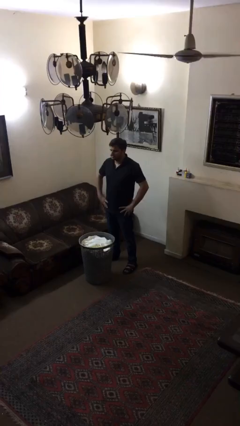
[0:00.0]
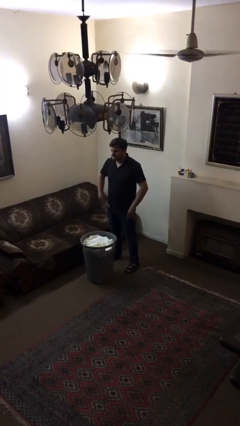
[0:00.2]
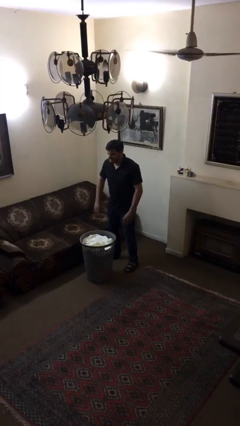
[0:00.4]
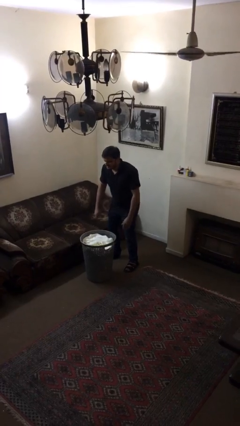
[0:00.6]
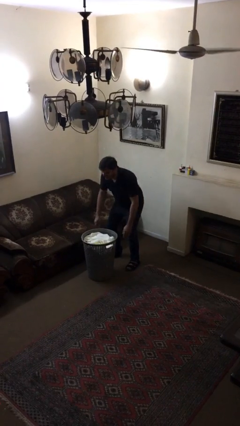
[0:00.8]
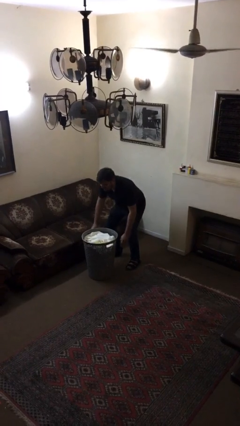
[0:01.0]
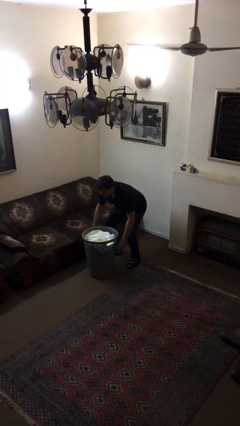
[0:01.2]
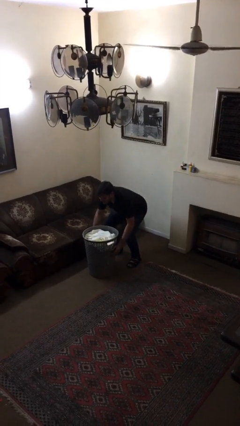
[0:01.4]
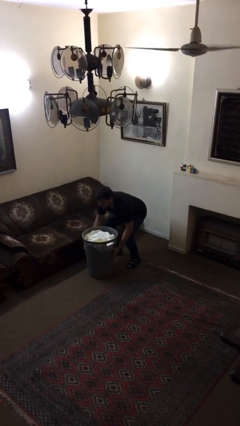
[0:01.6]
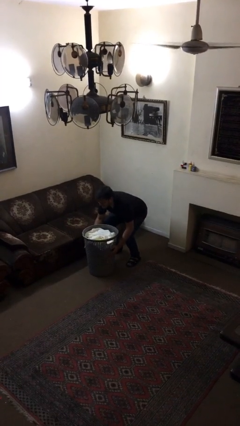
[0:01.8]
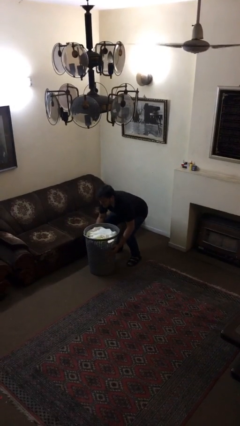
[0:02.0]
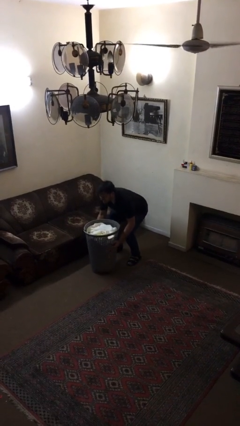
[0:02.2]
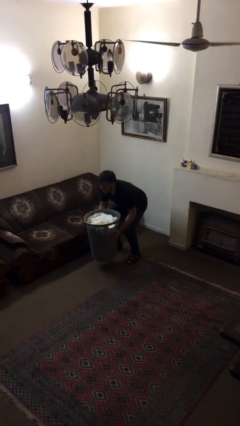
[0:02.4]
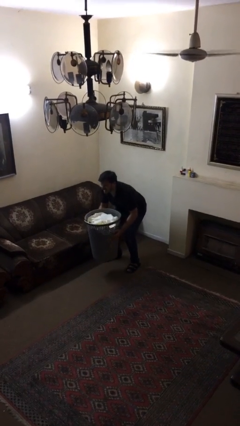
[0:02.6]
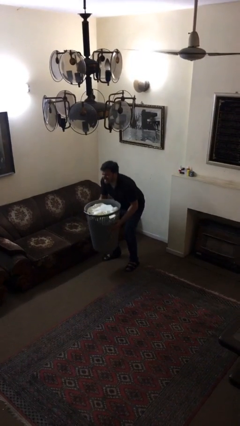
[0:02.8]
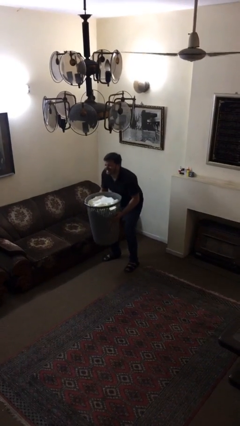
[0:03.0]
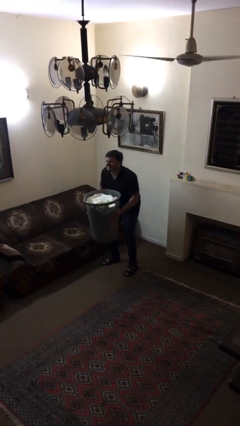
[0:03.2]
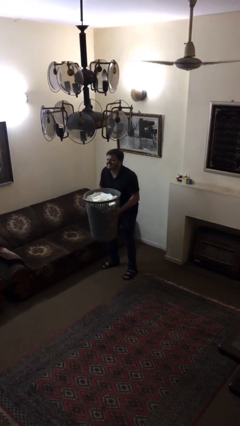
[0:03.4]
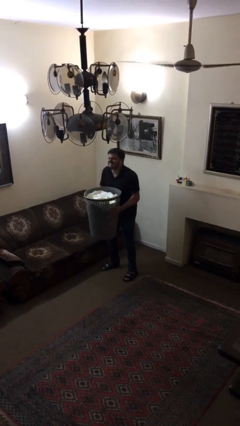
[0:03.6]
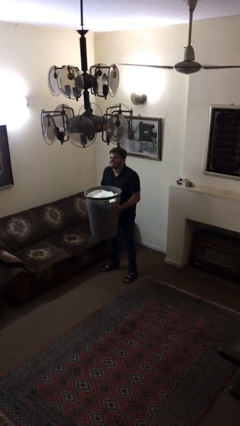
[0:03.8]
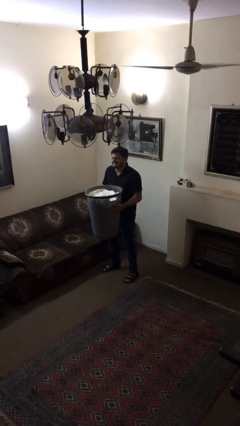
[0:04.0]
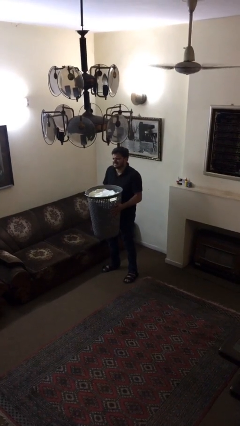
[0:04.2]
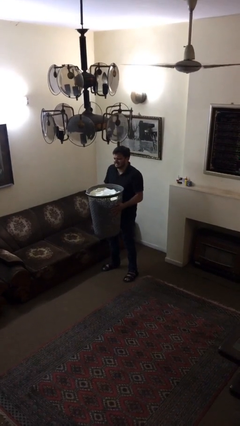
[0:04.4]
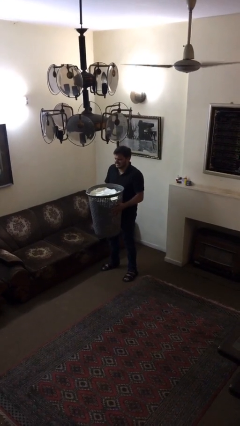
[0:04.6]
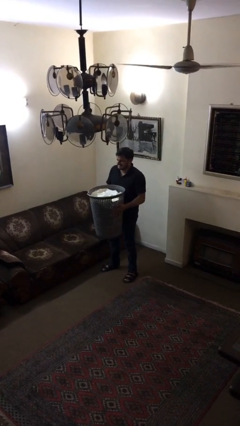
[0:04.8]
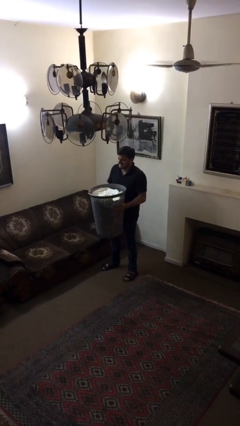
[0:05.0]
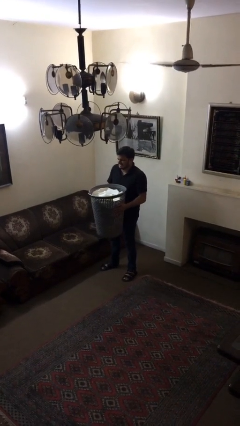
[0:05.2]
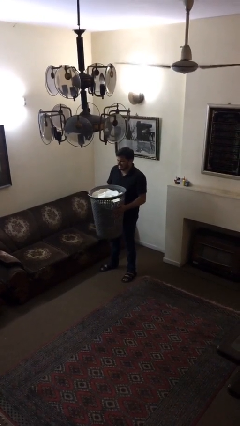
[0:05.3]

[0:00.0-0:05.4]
person picks up object from floor

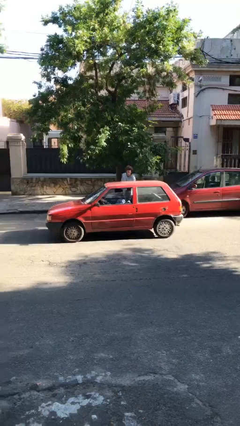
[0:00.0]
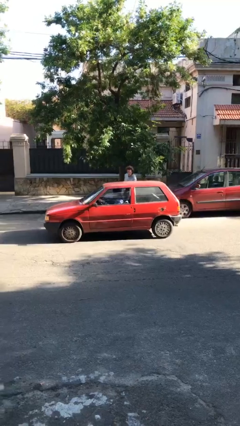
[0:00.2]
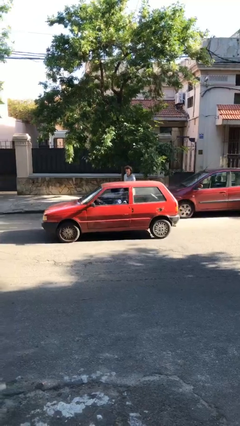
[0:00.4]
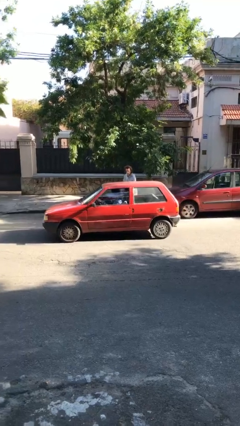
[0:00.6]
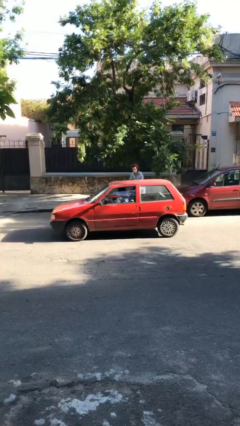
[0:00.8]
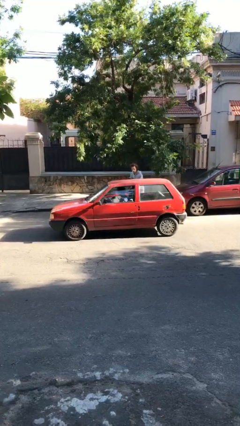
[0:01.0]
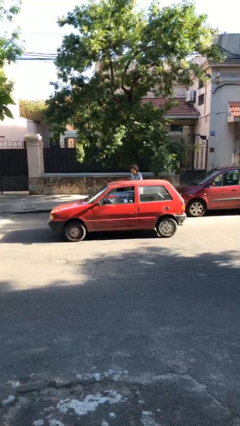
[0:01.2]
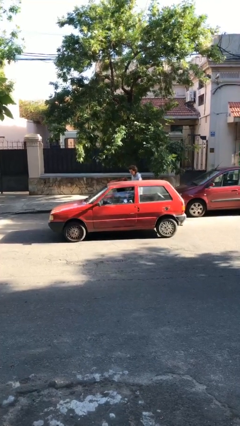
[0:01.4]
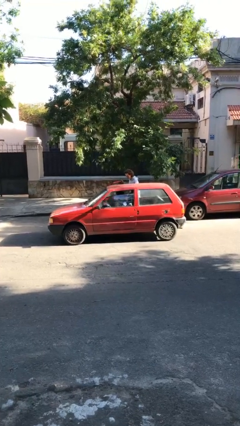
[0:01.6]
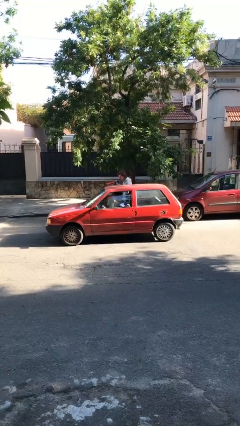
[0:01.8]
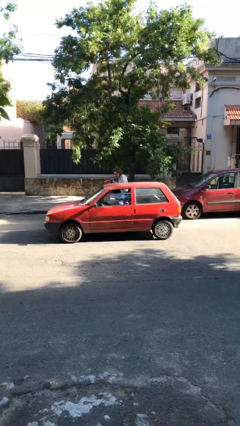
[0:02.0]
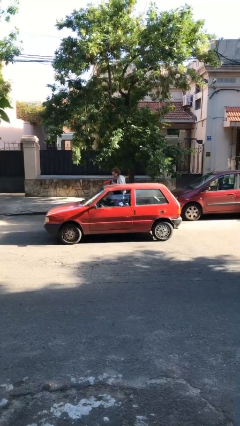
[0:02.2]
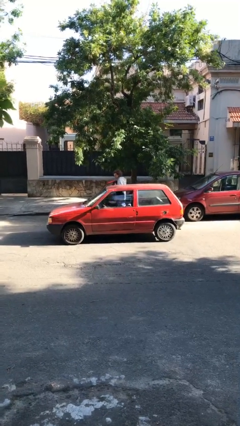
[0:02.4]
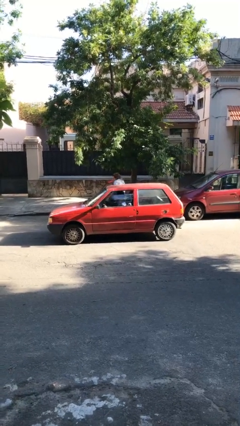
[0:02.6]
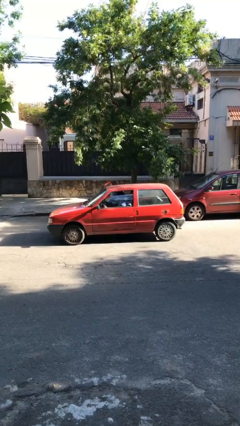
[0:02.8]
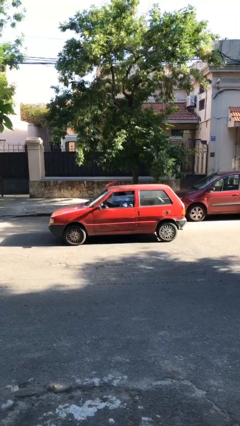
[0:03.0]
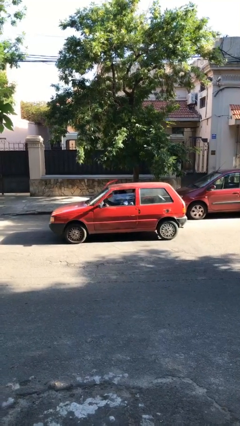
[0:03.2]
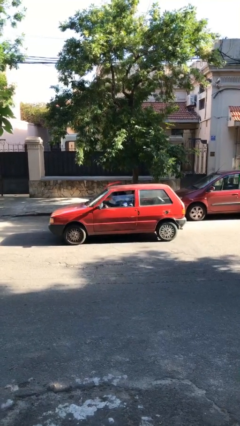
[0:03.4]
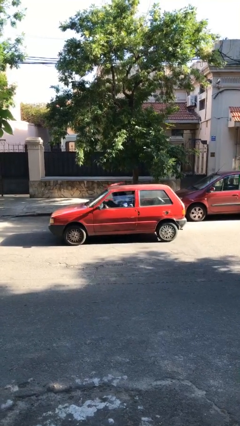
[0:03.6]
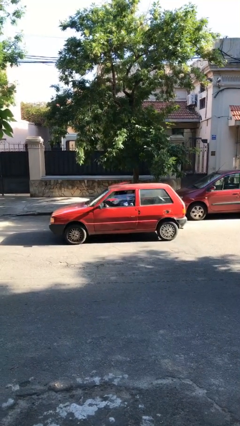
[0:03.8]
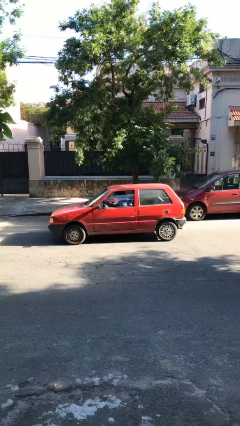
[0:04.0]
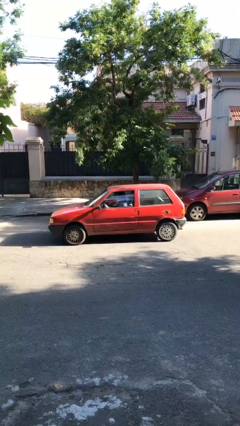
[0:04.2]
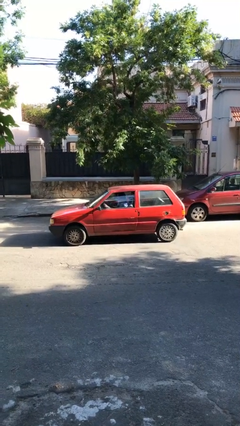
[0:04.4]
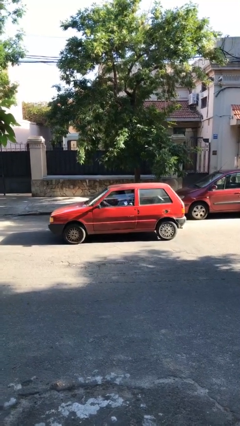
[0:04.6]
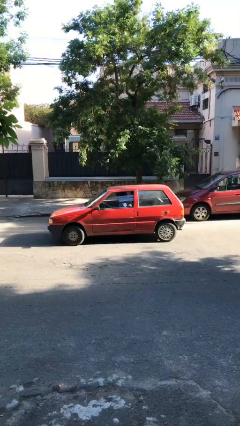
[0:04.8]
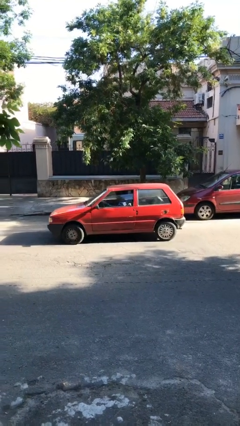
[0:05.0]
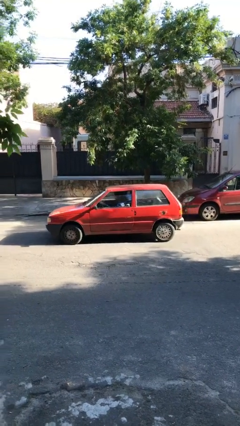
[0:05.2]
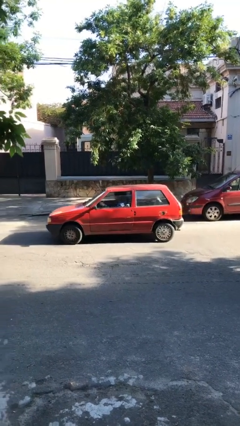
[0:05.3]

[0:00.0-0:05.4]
car picks up person

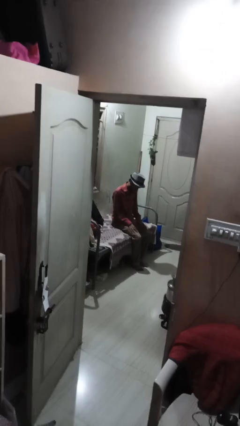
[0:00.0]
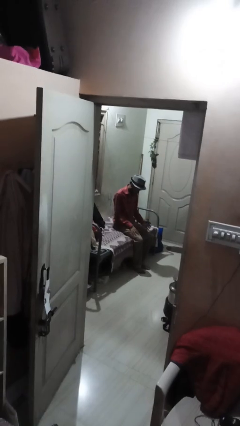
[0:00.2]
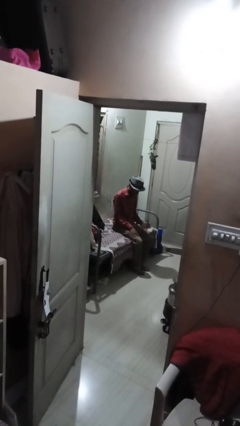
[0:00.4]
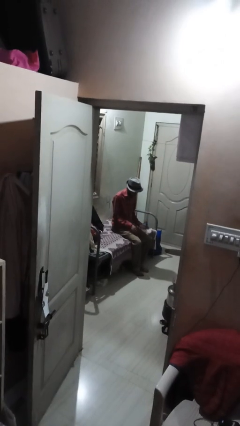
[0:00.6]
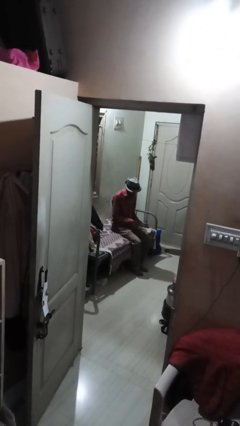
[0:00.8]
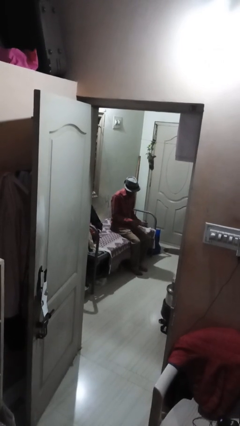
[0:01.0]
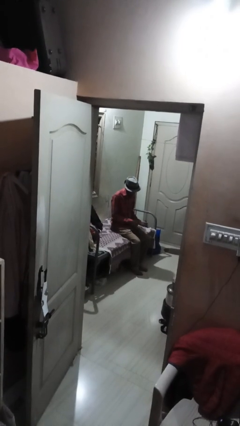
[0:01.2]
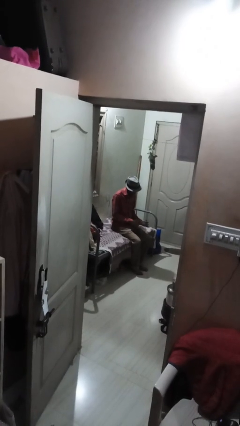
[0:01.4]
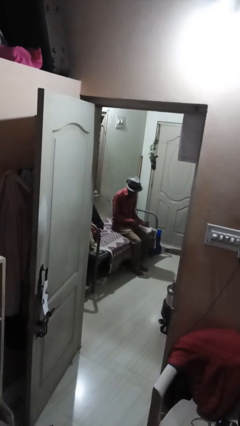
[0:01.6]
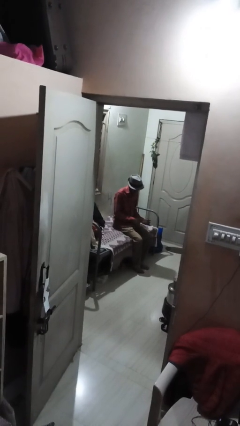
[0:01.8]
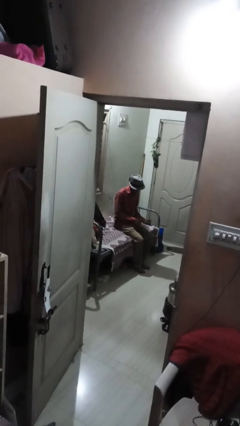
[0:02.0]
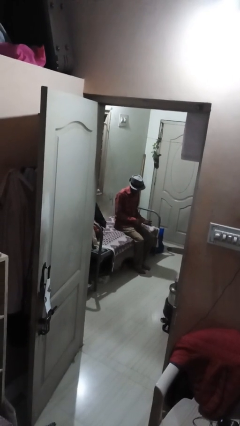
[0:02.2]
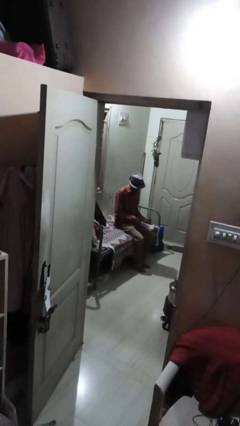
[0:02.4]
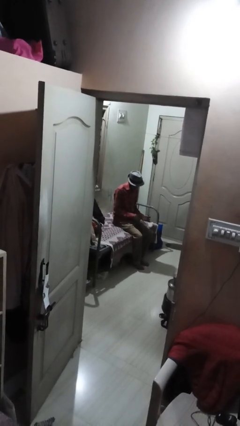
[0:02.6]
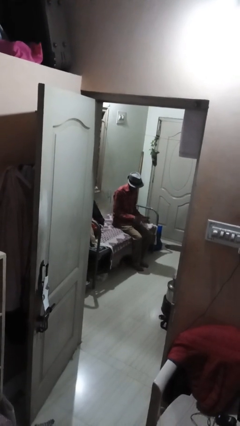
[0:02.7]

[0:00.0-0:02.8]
person looks at hands in lap

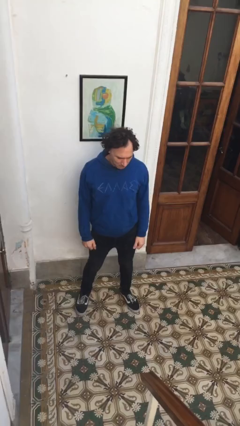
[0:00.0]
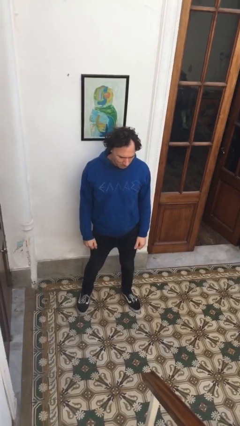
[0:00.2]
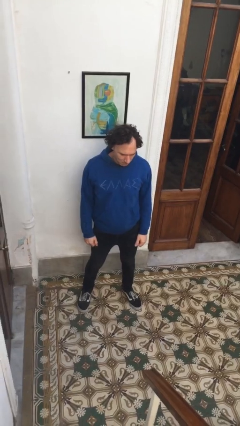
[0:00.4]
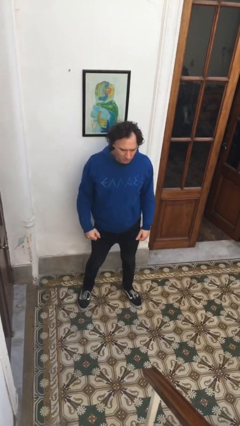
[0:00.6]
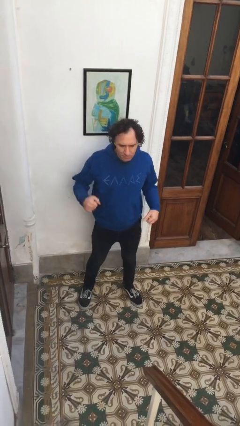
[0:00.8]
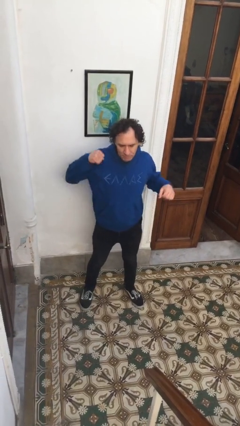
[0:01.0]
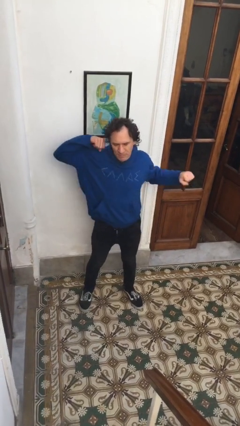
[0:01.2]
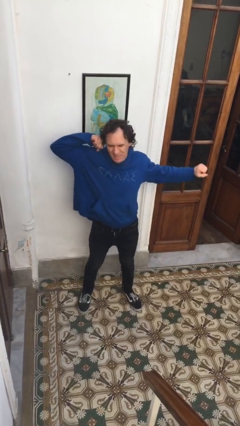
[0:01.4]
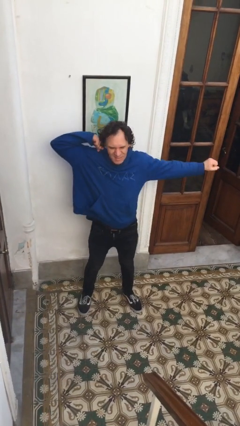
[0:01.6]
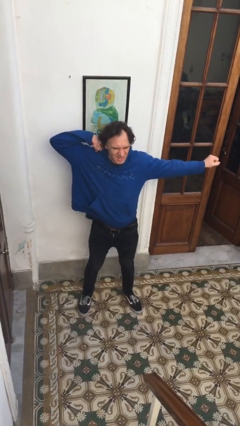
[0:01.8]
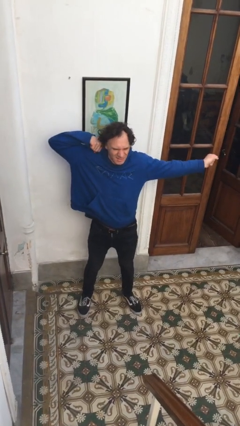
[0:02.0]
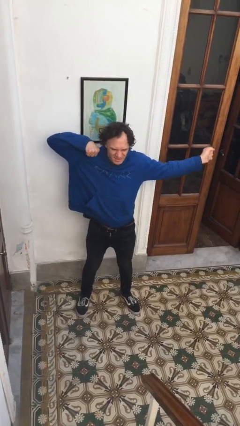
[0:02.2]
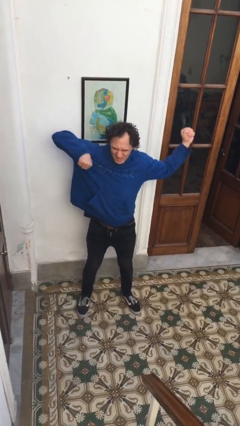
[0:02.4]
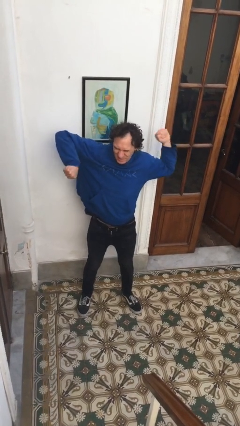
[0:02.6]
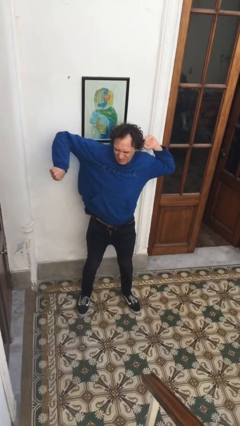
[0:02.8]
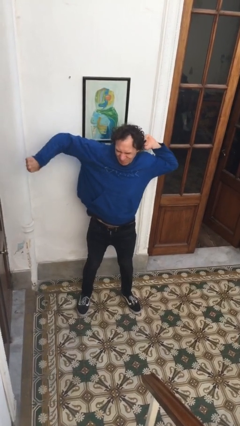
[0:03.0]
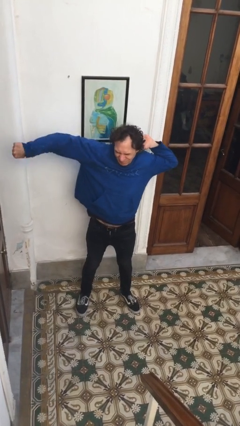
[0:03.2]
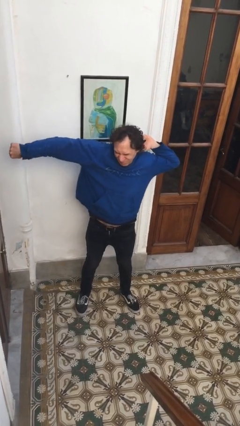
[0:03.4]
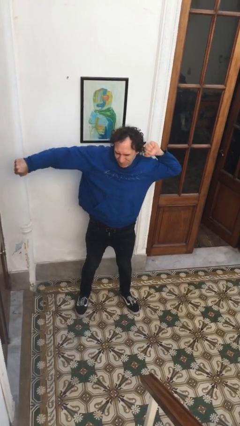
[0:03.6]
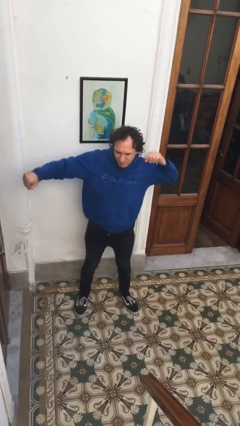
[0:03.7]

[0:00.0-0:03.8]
person stretches arms to side
